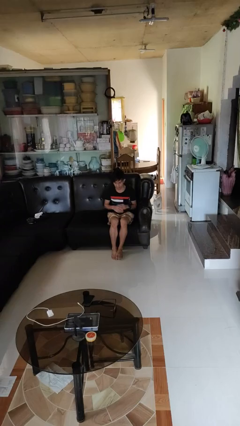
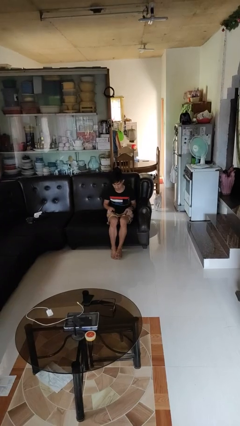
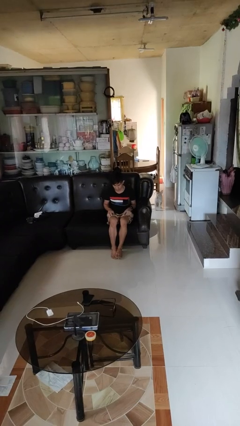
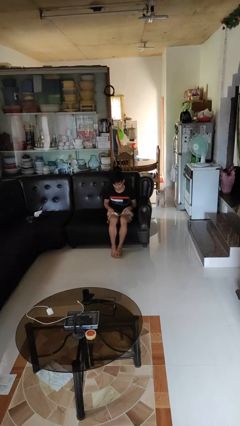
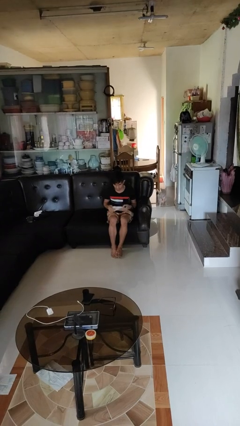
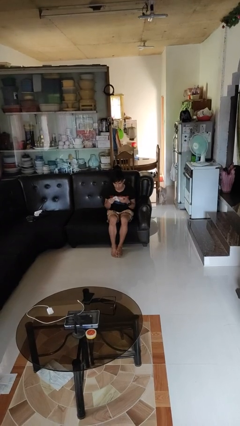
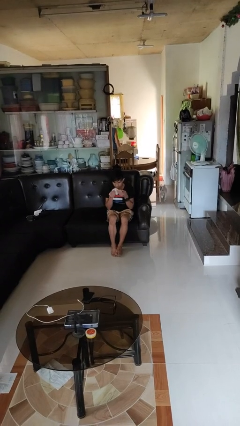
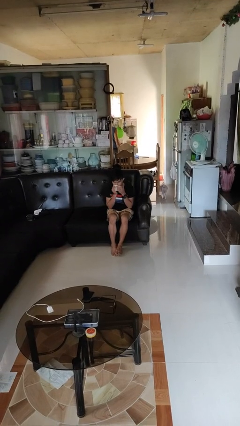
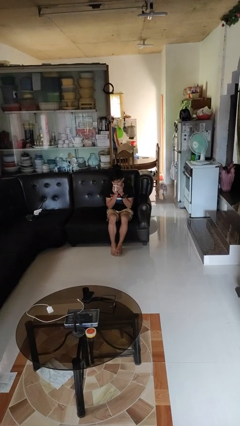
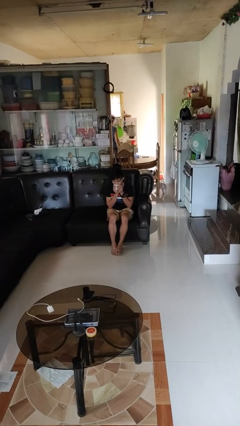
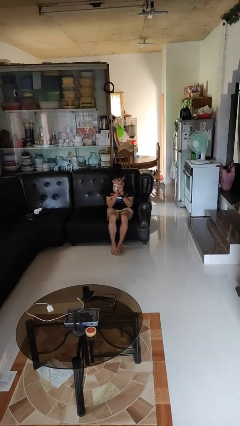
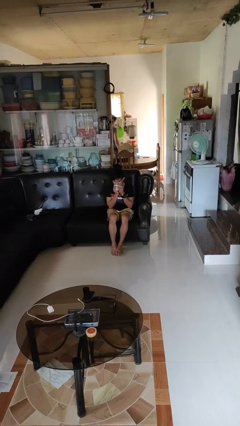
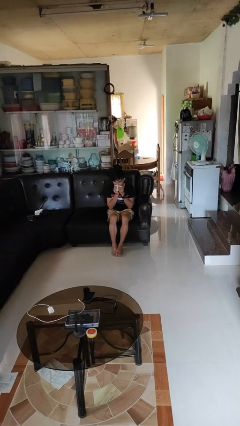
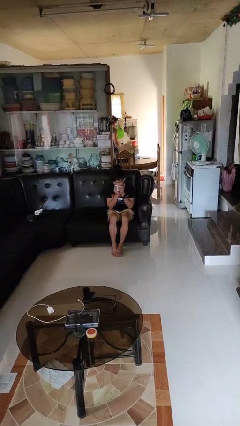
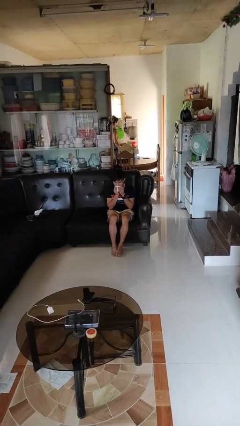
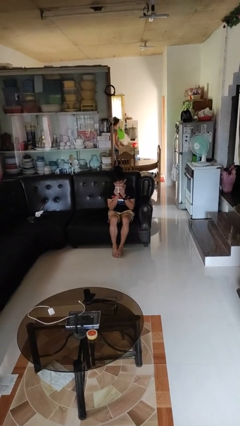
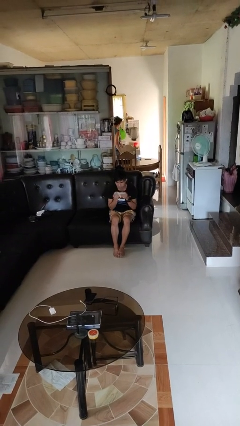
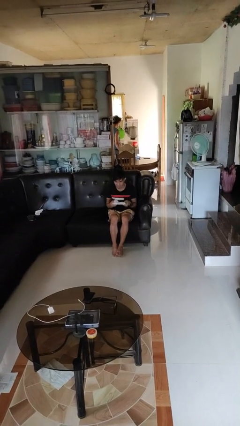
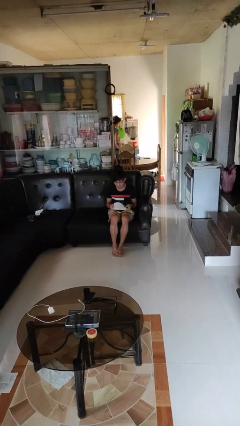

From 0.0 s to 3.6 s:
person wipes mouth with napkin

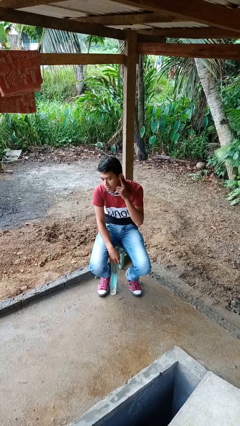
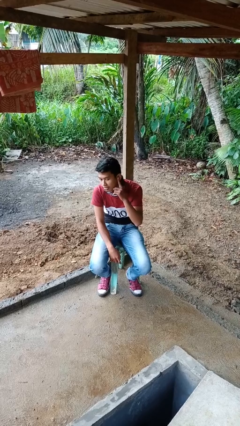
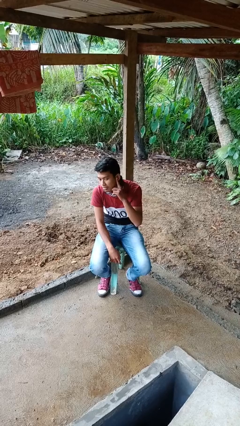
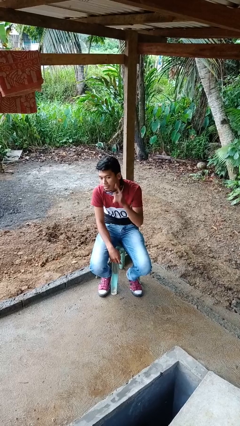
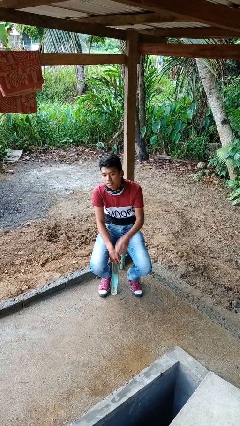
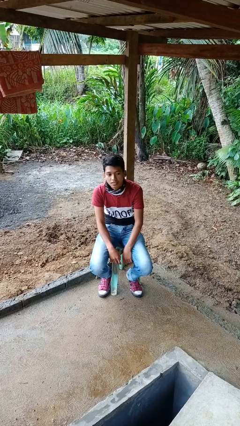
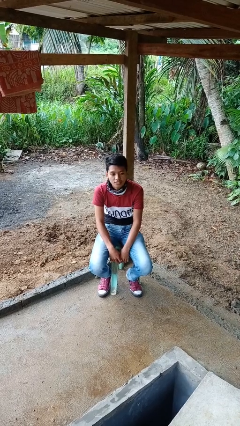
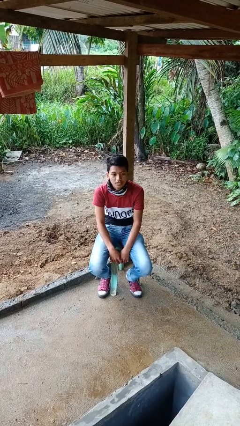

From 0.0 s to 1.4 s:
person gestures listen closely

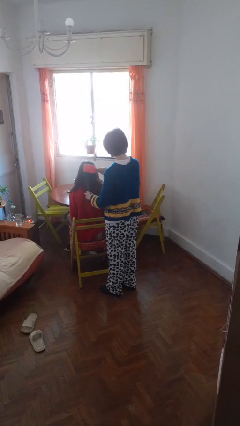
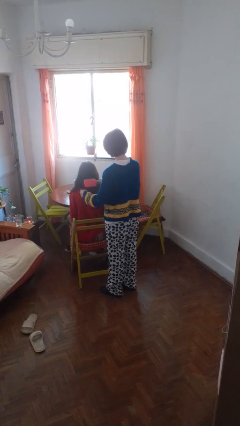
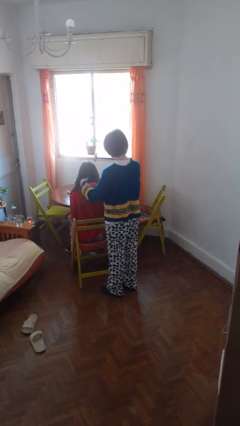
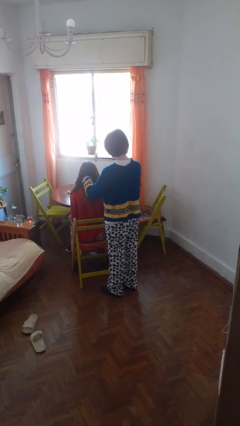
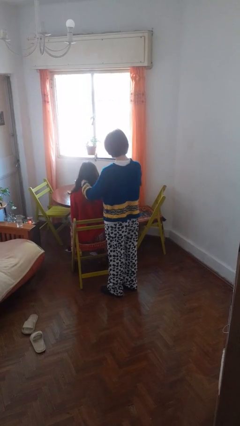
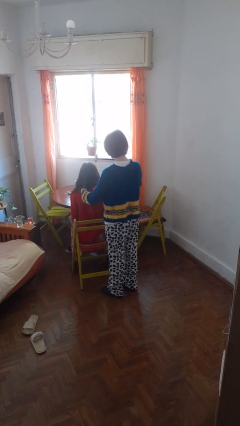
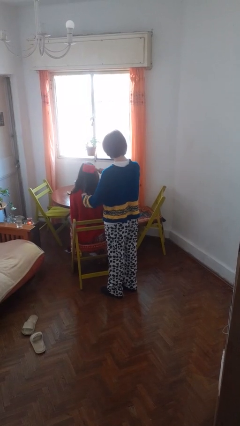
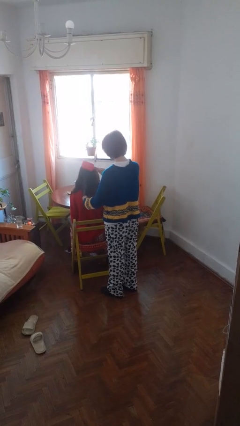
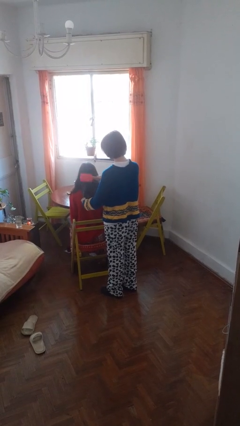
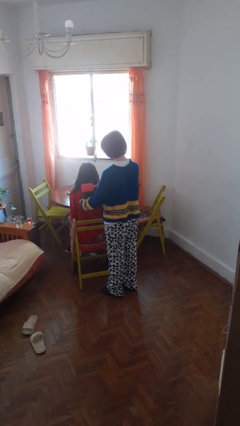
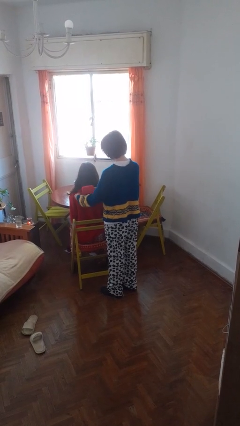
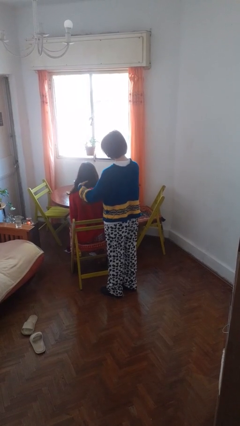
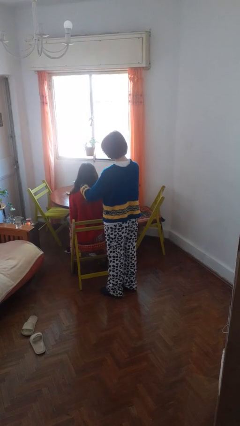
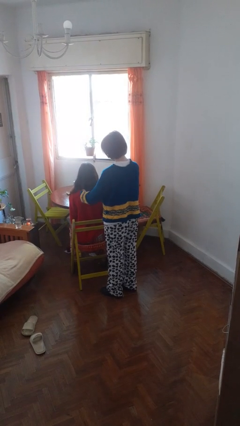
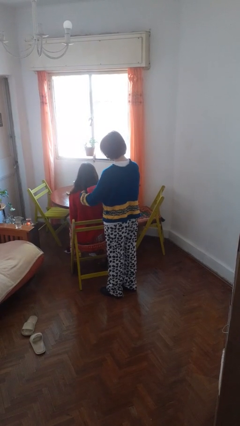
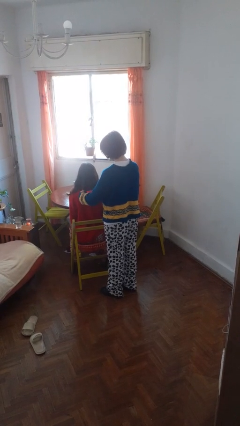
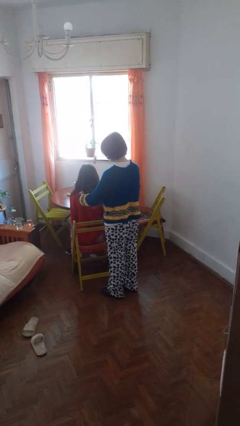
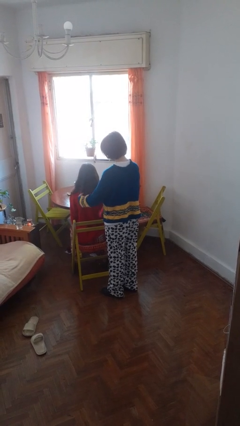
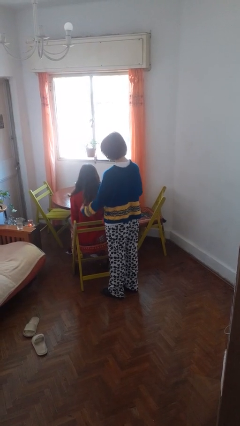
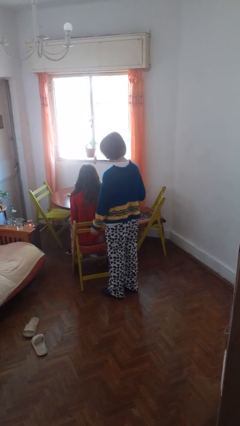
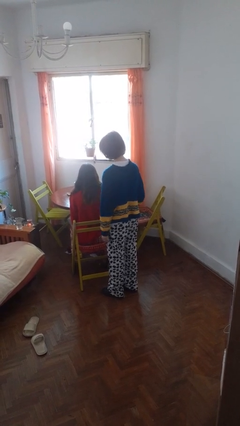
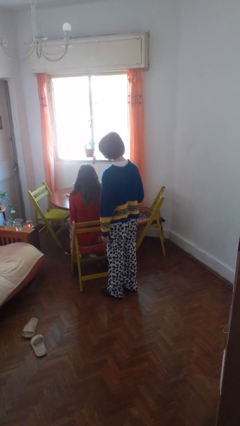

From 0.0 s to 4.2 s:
person brushes hair of person

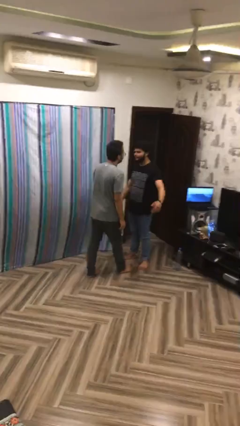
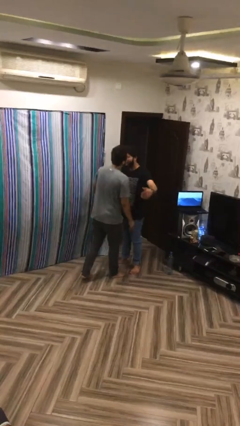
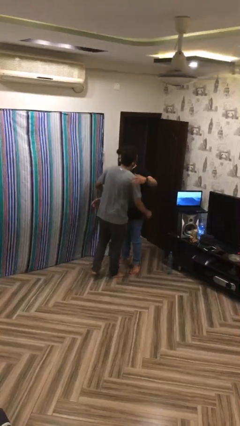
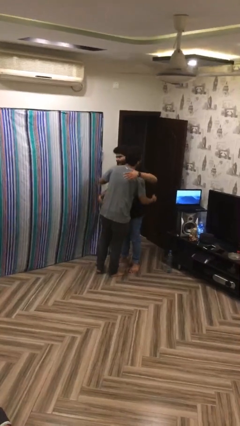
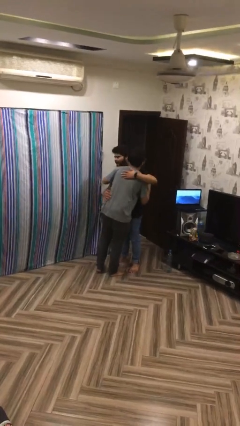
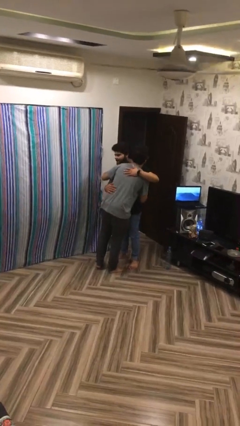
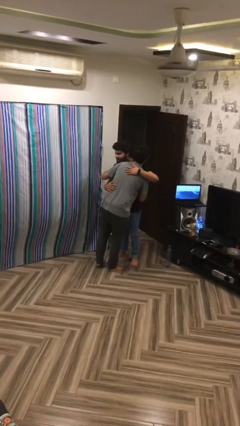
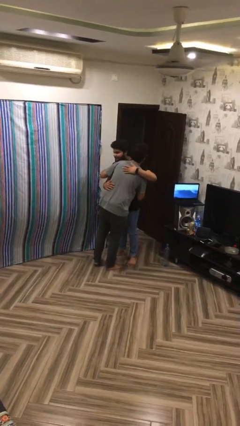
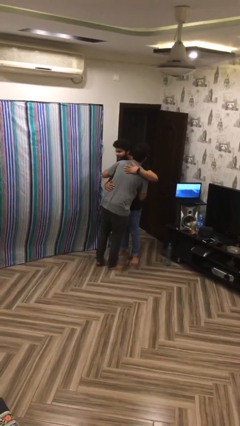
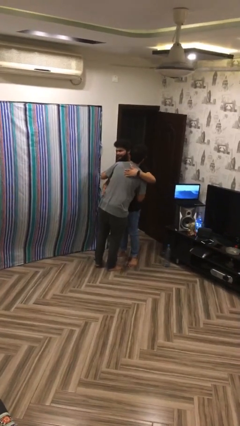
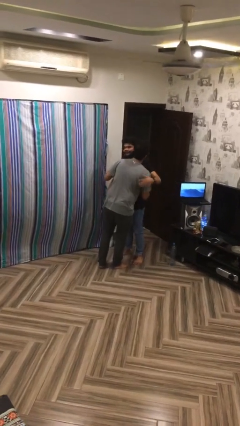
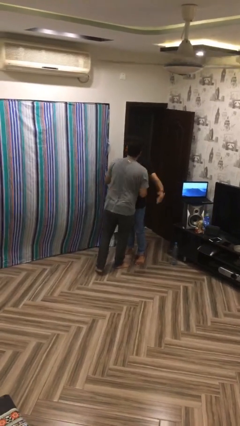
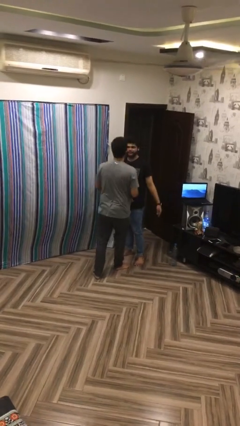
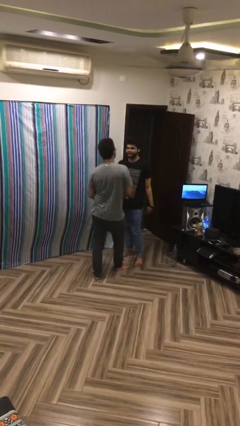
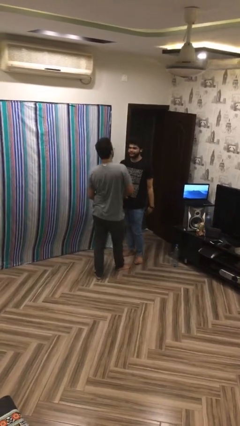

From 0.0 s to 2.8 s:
person embraces person

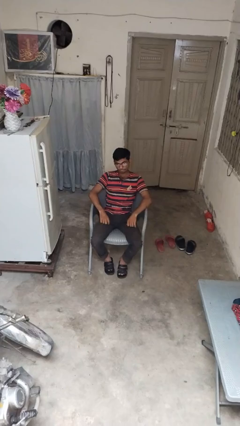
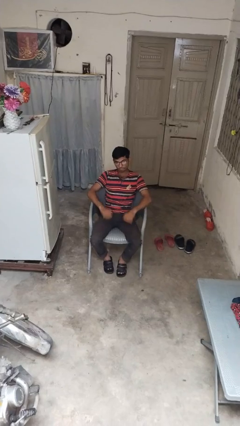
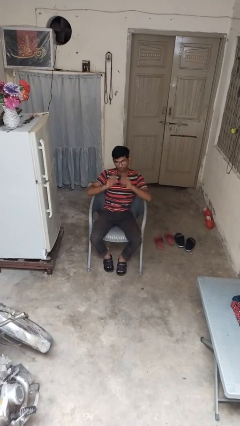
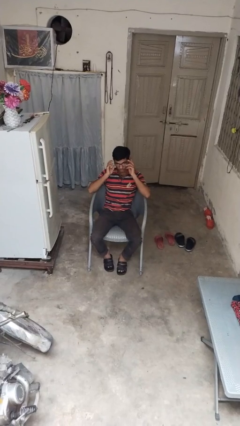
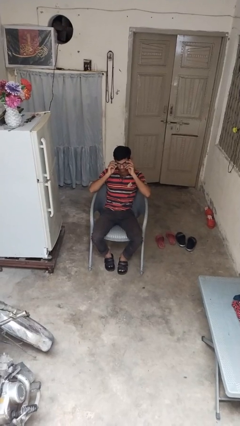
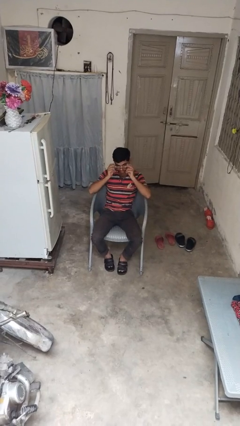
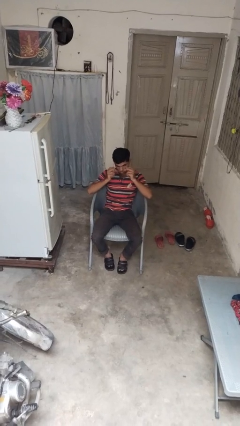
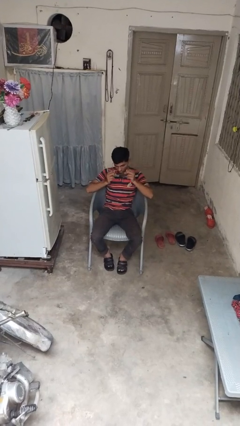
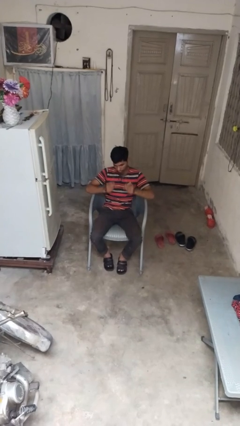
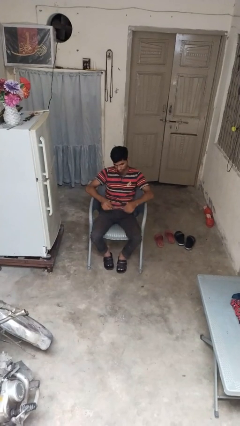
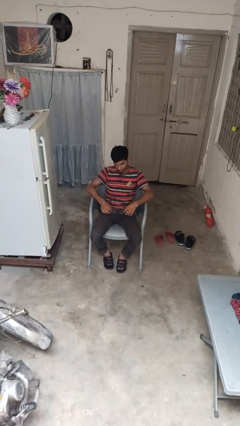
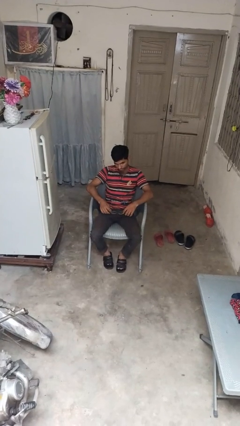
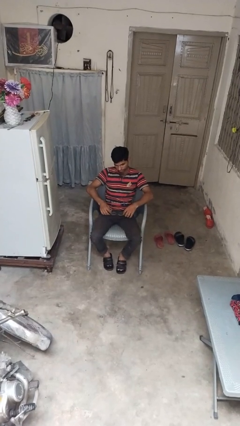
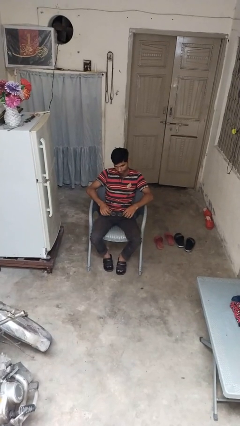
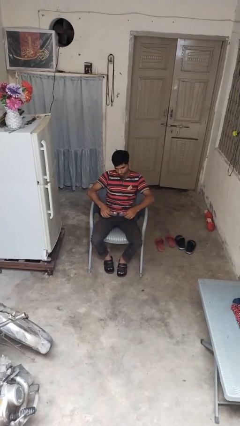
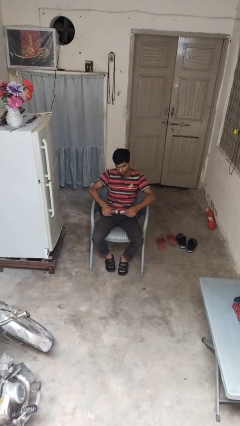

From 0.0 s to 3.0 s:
person takes off glasses

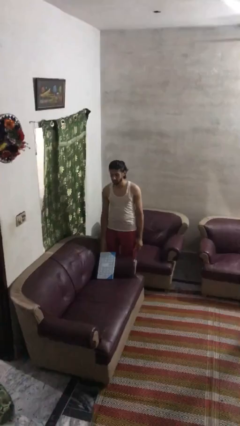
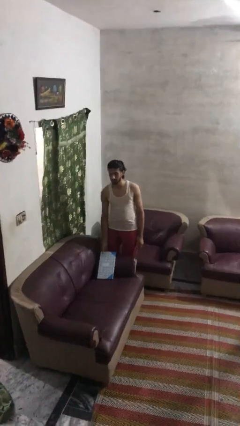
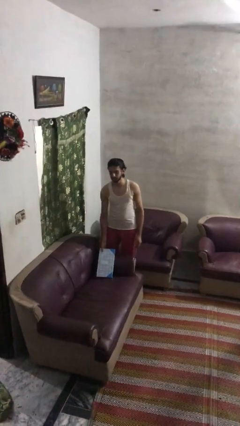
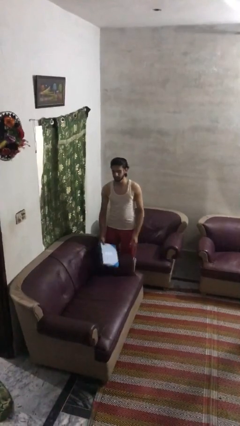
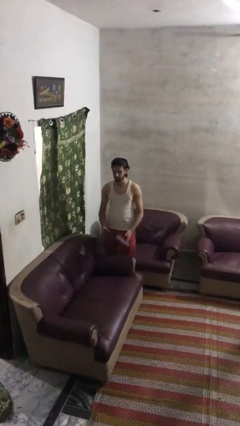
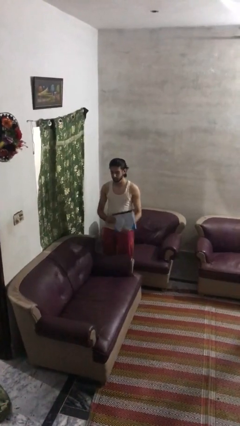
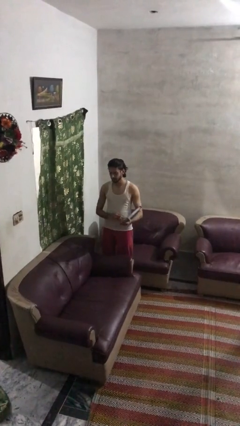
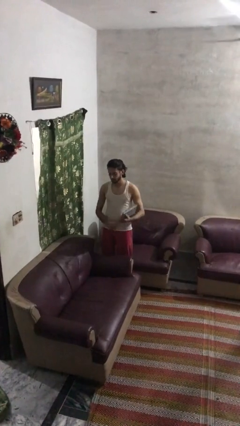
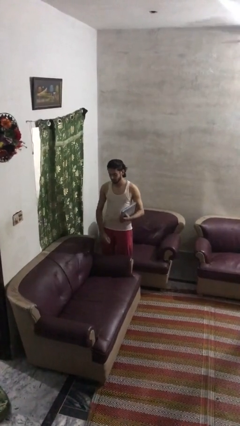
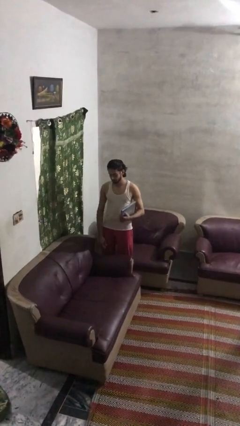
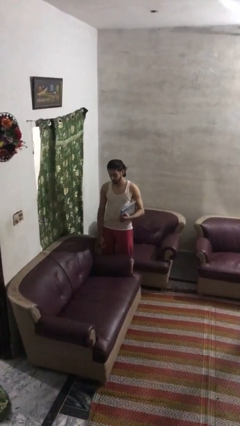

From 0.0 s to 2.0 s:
person picks up object from couch

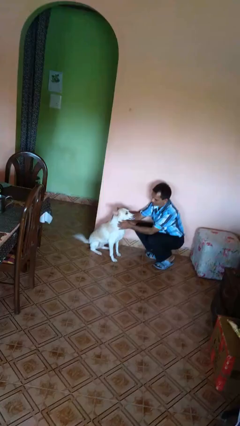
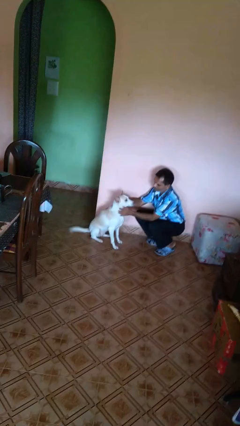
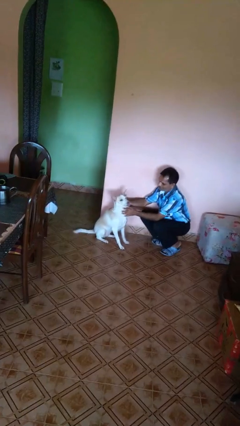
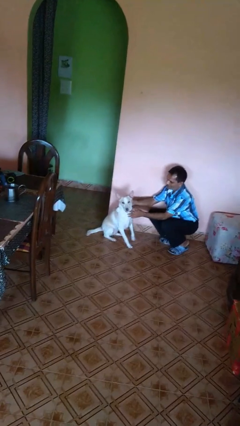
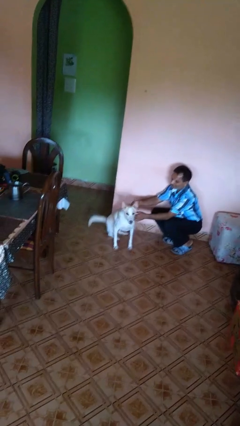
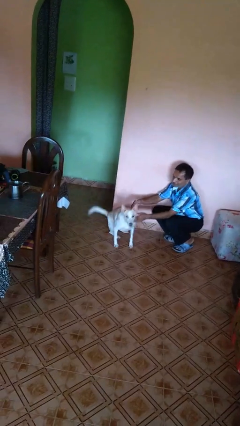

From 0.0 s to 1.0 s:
person pets dog
